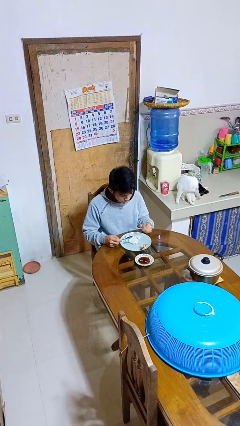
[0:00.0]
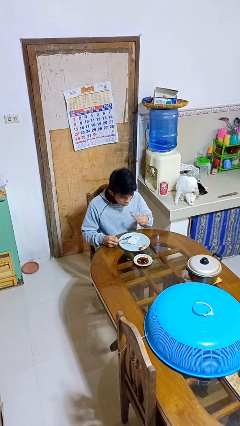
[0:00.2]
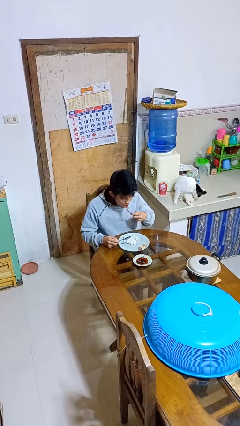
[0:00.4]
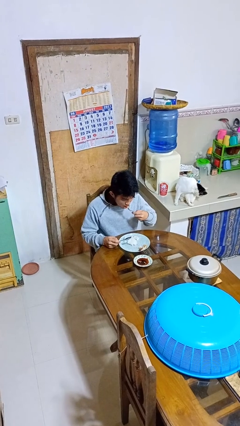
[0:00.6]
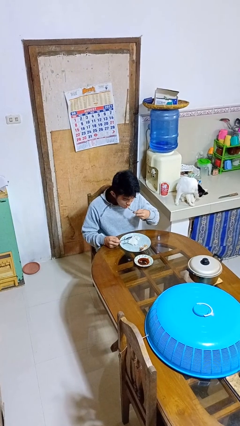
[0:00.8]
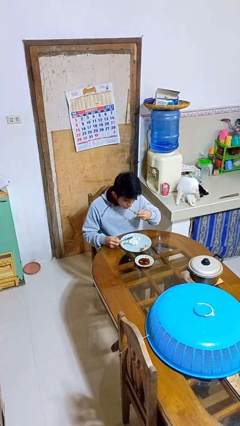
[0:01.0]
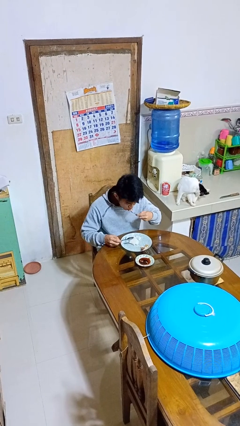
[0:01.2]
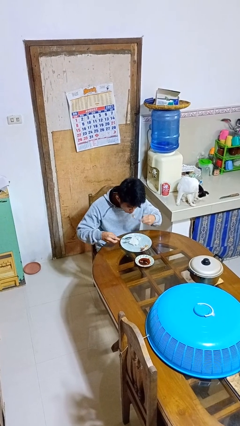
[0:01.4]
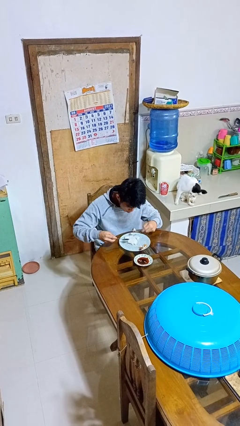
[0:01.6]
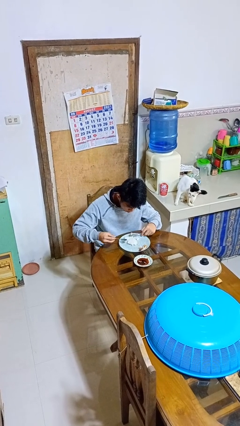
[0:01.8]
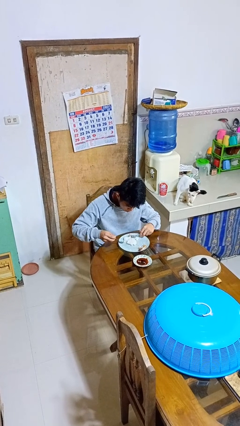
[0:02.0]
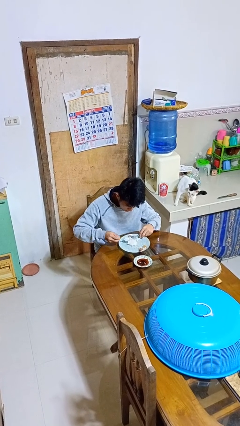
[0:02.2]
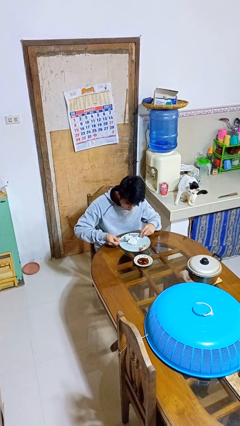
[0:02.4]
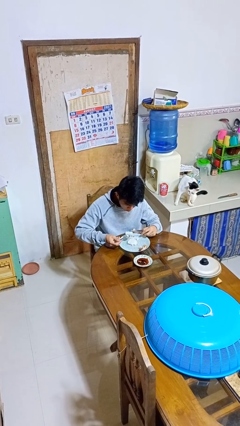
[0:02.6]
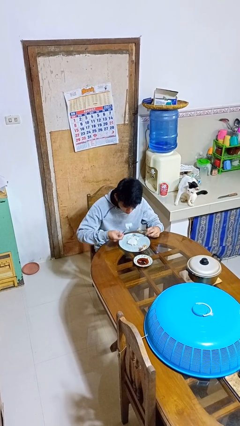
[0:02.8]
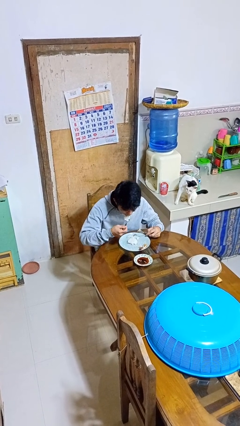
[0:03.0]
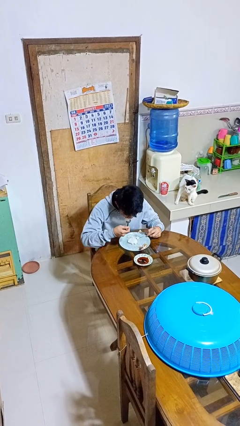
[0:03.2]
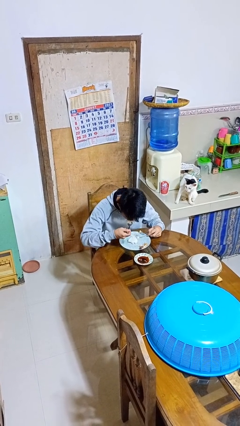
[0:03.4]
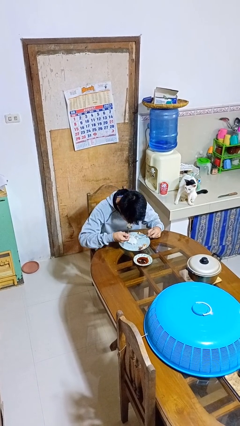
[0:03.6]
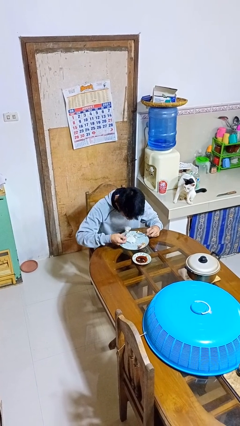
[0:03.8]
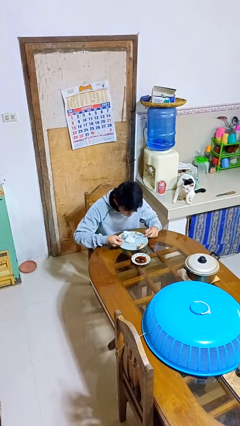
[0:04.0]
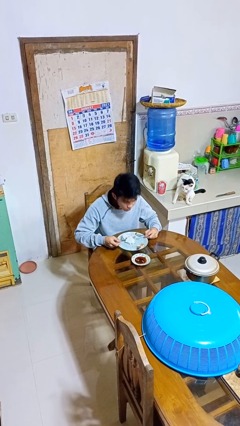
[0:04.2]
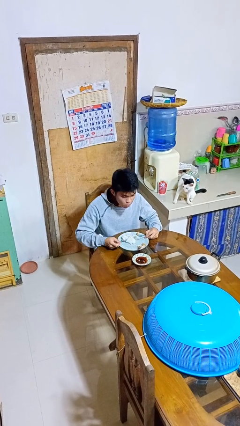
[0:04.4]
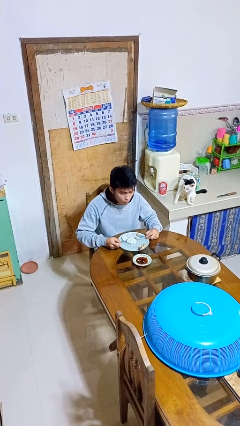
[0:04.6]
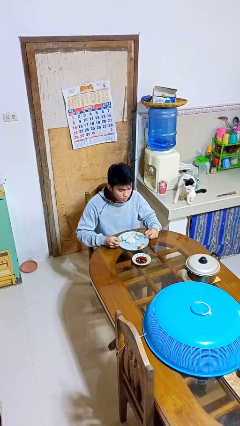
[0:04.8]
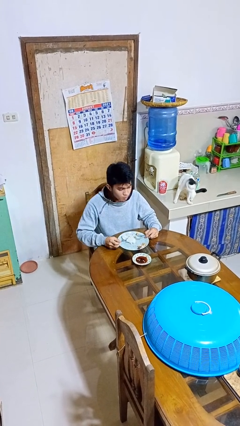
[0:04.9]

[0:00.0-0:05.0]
person eats with utensil

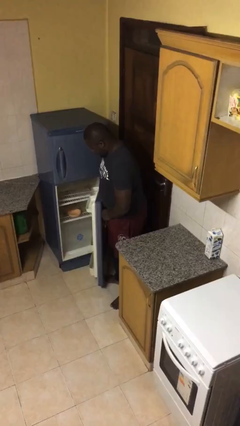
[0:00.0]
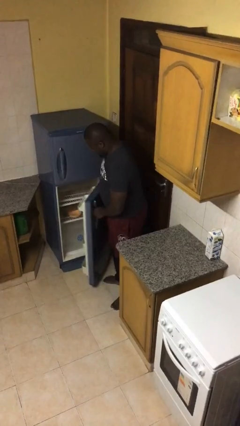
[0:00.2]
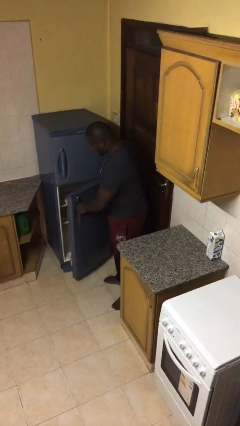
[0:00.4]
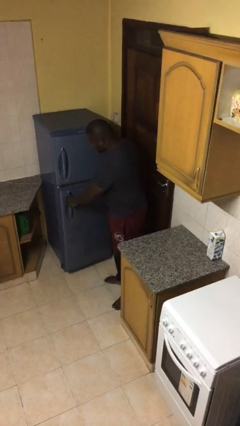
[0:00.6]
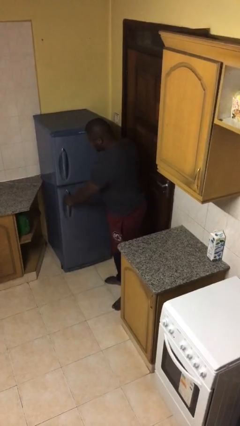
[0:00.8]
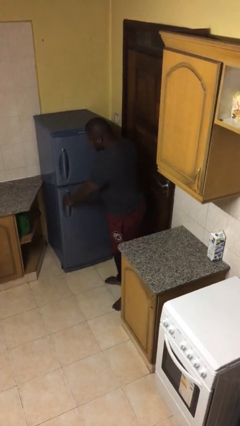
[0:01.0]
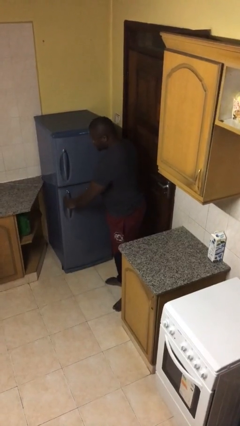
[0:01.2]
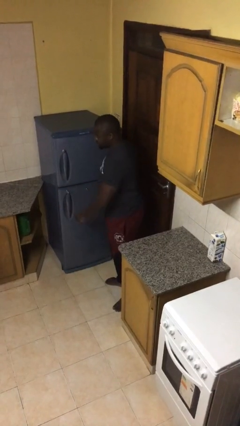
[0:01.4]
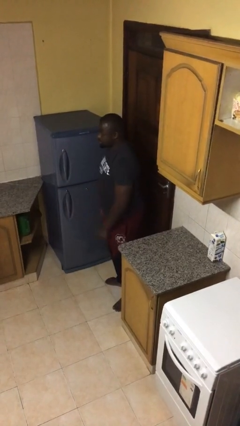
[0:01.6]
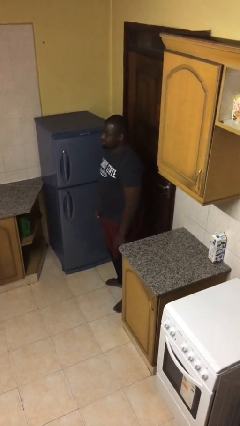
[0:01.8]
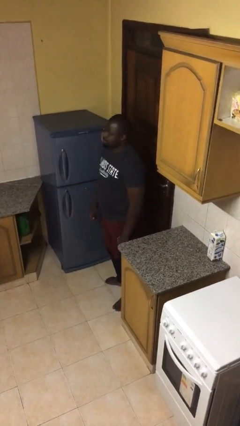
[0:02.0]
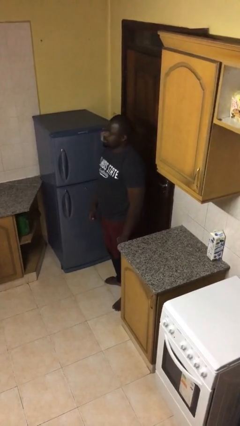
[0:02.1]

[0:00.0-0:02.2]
person closes refrigerator

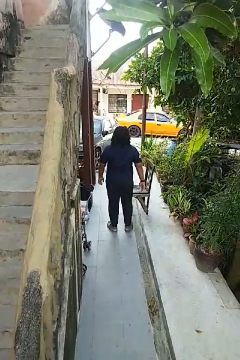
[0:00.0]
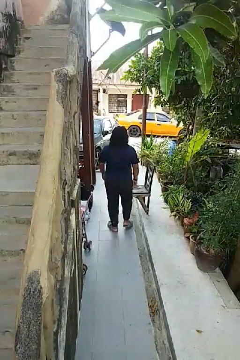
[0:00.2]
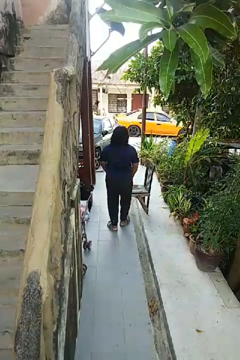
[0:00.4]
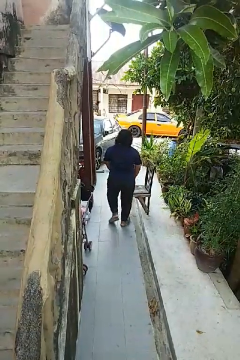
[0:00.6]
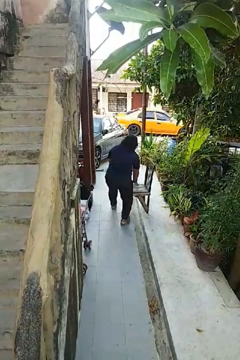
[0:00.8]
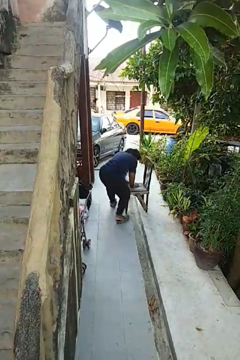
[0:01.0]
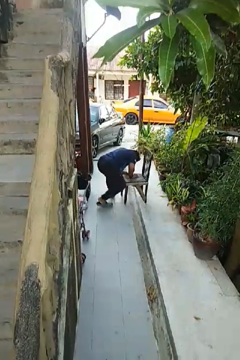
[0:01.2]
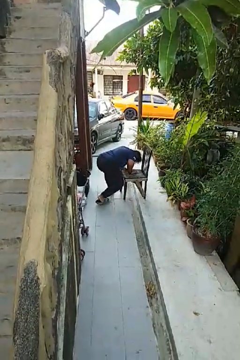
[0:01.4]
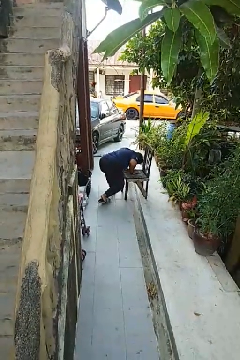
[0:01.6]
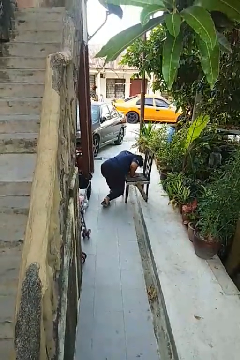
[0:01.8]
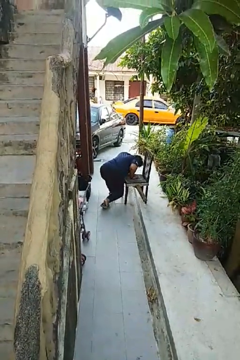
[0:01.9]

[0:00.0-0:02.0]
person trips on object on floor

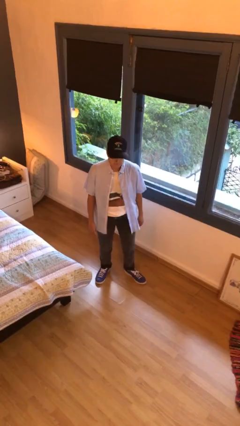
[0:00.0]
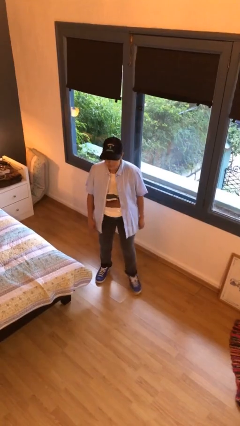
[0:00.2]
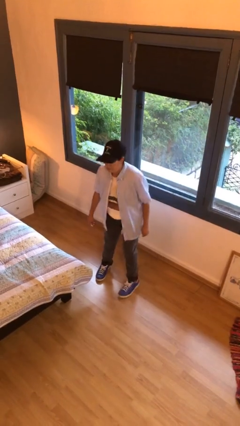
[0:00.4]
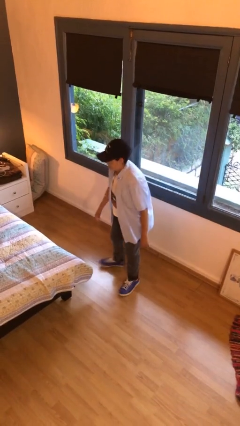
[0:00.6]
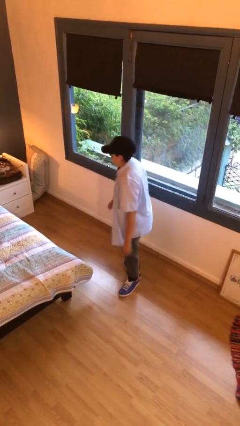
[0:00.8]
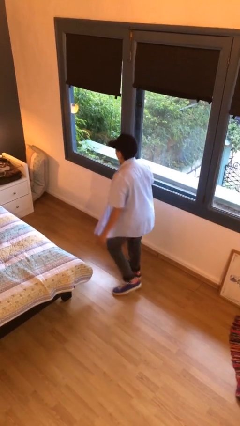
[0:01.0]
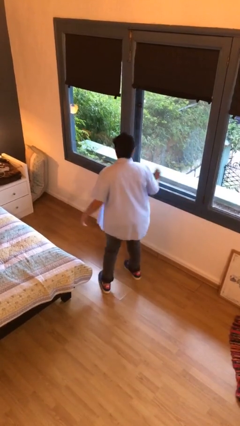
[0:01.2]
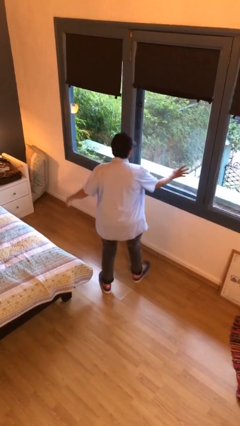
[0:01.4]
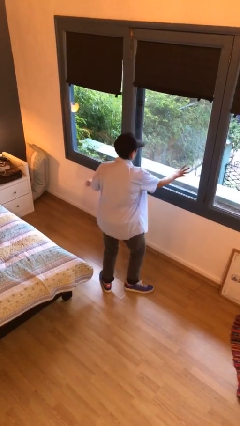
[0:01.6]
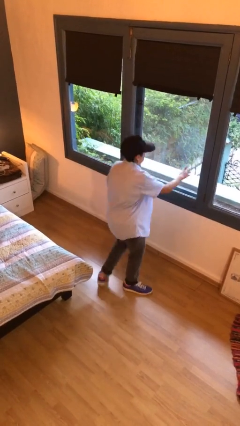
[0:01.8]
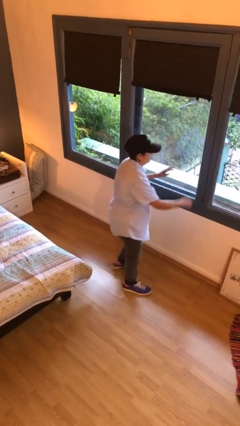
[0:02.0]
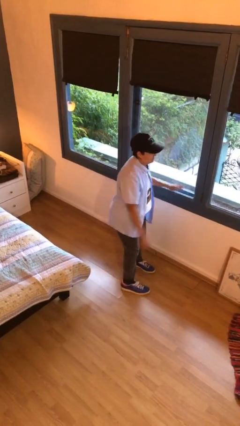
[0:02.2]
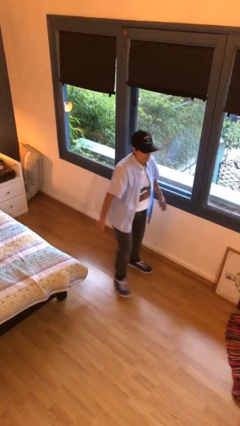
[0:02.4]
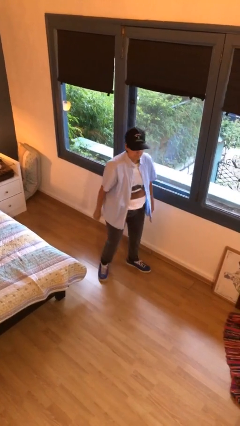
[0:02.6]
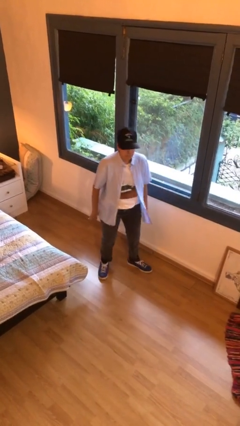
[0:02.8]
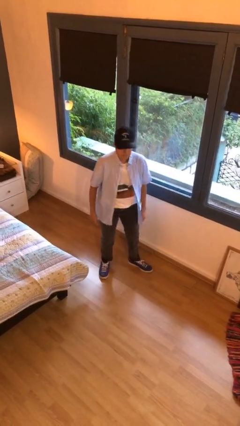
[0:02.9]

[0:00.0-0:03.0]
person twirls

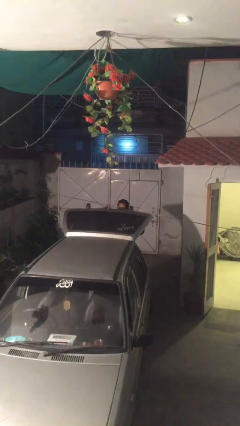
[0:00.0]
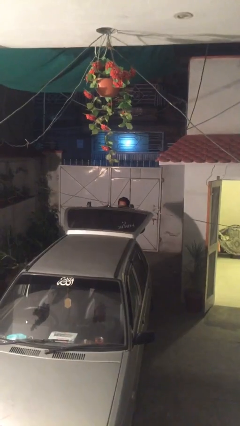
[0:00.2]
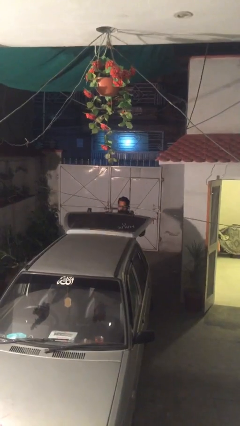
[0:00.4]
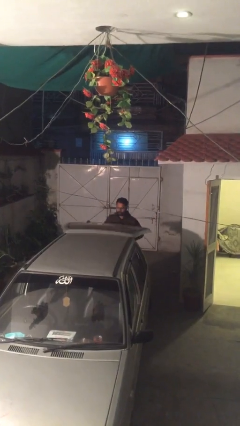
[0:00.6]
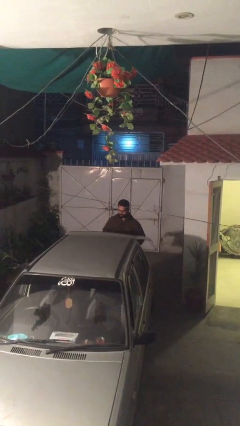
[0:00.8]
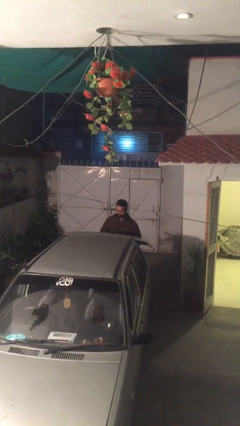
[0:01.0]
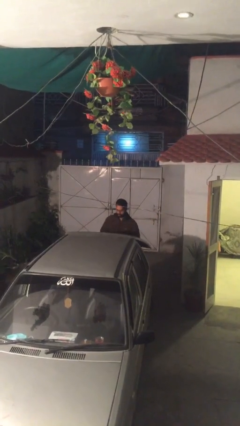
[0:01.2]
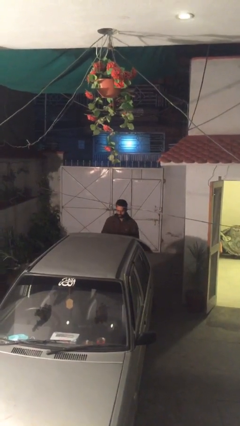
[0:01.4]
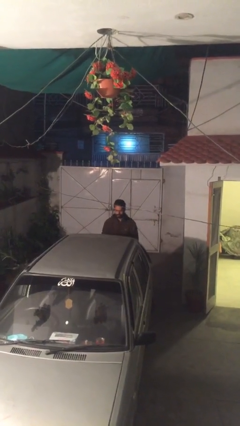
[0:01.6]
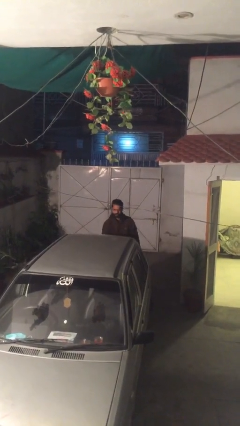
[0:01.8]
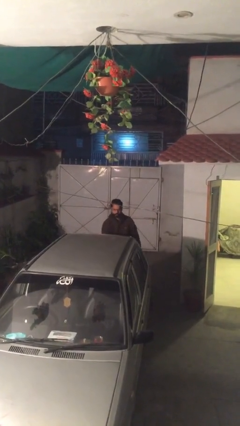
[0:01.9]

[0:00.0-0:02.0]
person closes car trunk

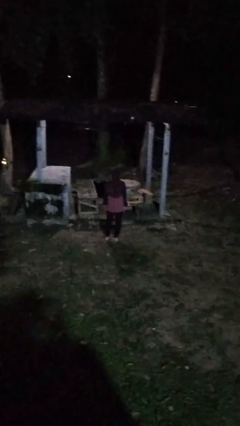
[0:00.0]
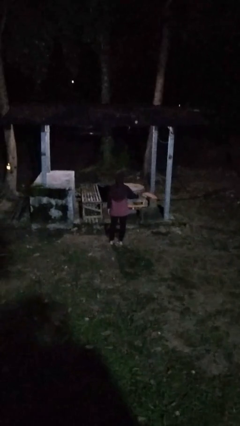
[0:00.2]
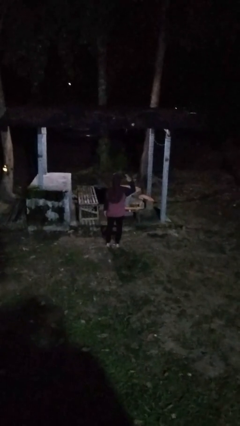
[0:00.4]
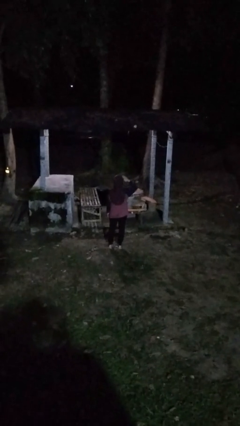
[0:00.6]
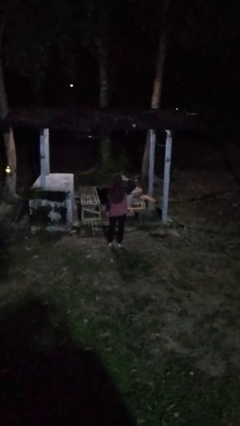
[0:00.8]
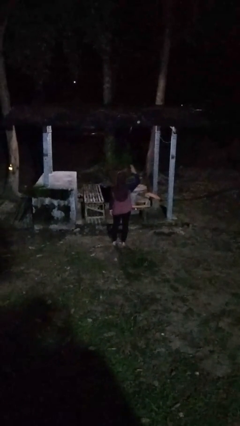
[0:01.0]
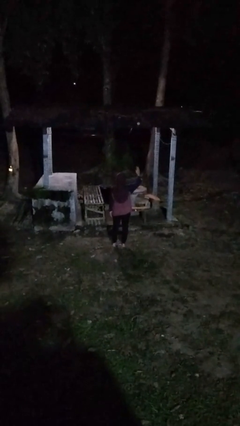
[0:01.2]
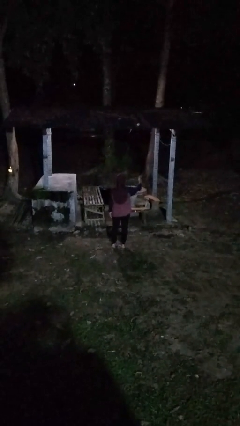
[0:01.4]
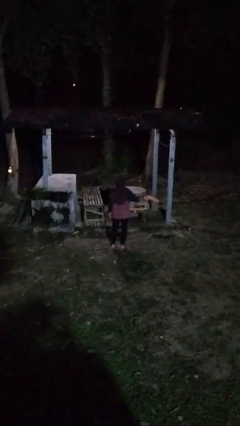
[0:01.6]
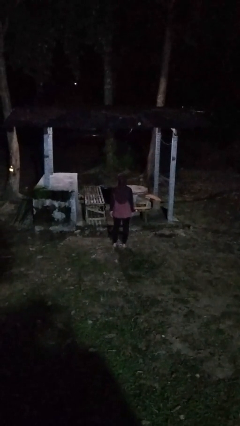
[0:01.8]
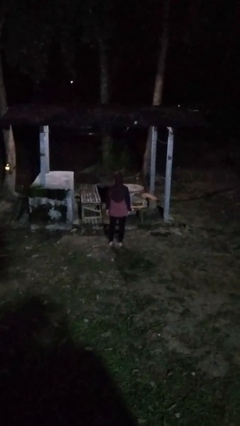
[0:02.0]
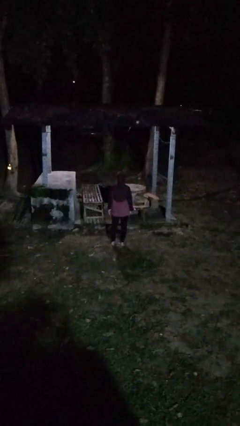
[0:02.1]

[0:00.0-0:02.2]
person salutes

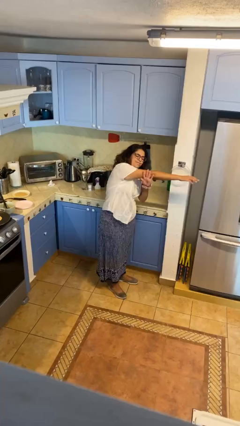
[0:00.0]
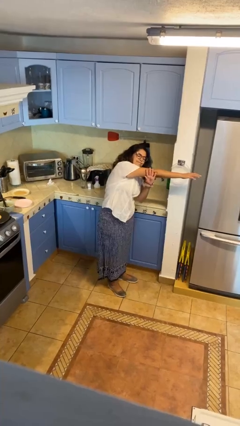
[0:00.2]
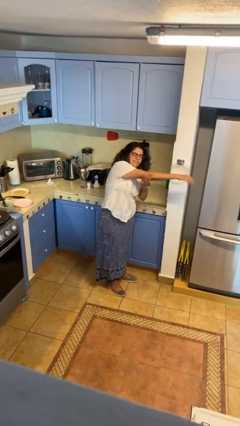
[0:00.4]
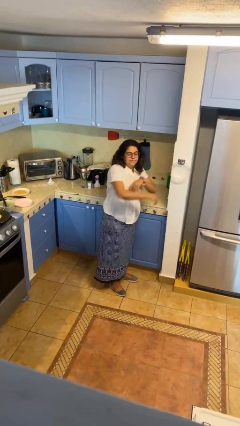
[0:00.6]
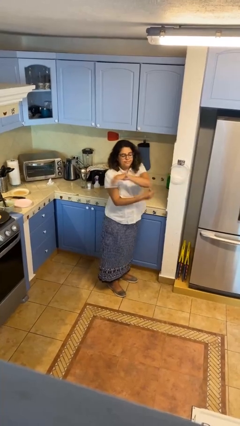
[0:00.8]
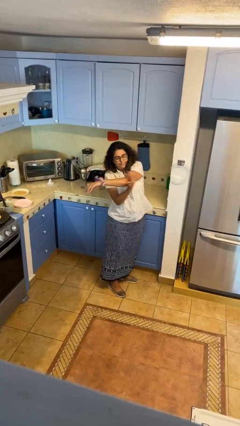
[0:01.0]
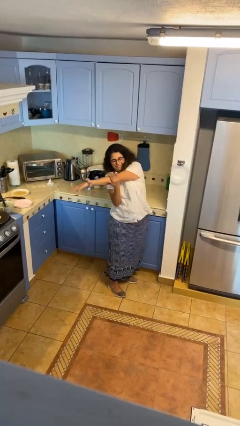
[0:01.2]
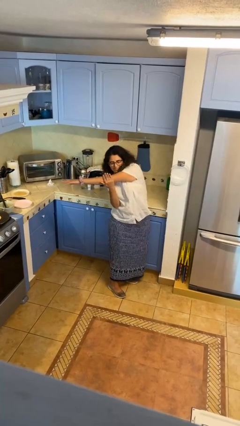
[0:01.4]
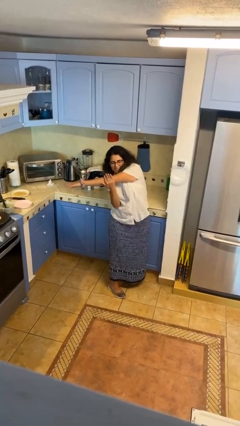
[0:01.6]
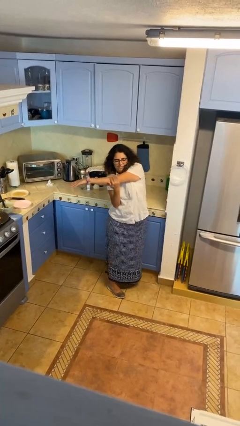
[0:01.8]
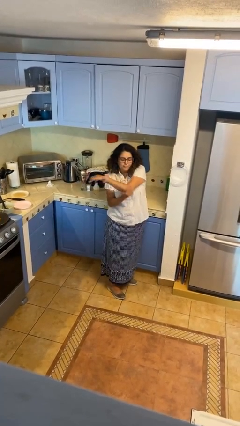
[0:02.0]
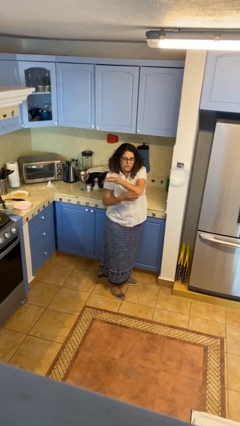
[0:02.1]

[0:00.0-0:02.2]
person stretches arms to side
